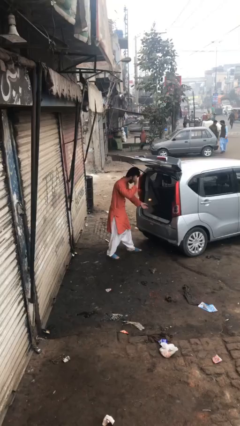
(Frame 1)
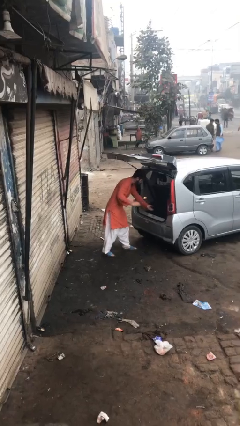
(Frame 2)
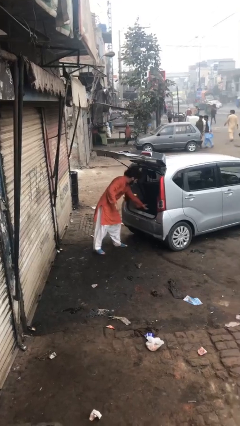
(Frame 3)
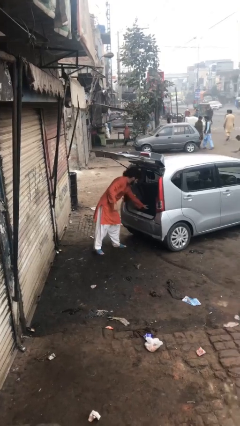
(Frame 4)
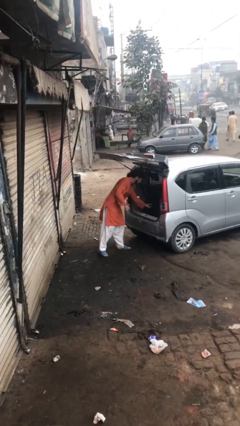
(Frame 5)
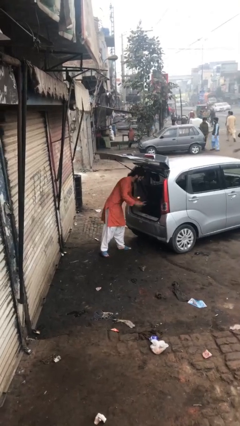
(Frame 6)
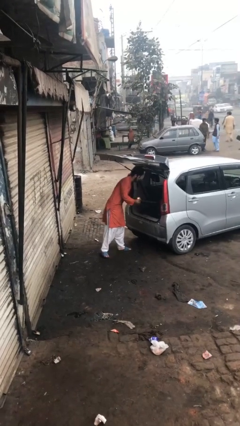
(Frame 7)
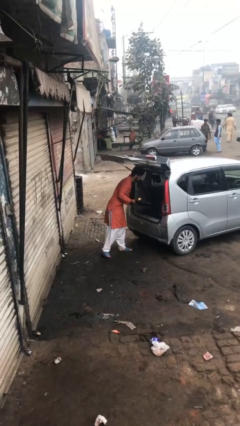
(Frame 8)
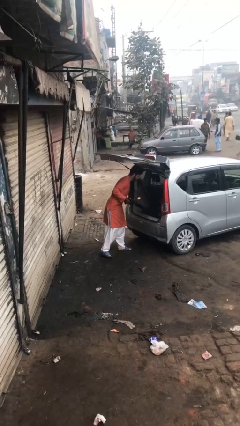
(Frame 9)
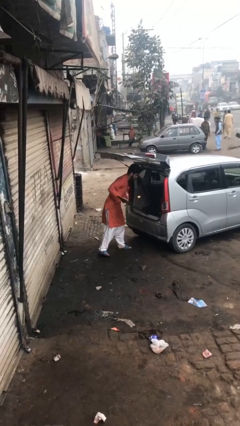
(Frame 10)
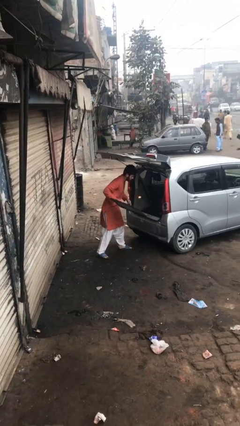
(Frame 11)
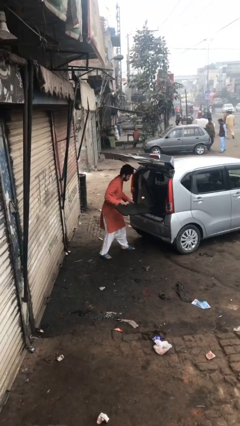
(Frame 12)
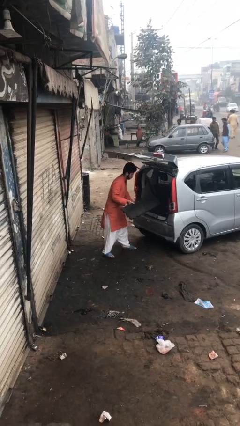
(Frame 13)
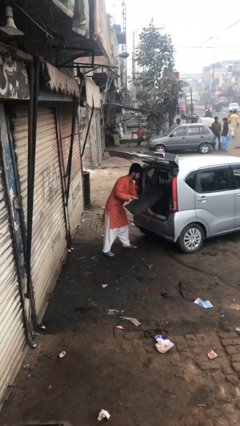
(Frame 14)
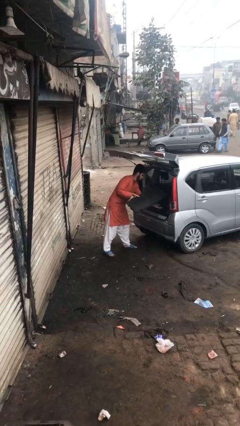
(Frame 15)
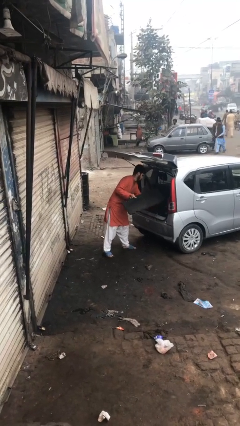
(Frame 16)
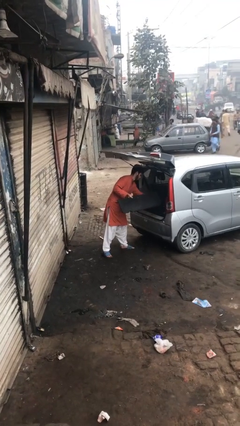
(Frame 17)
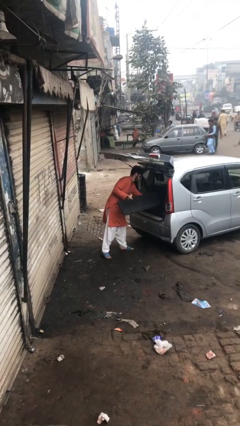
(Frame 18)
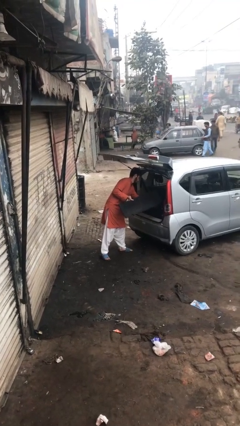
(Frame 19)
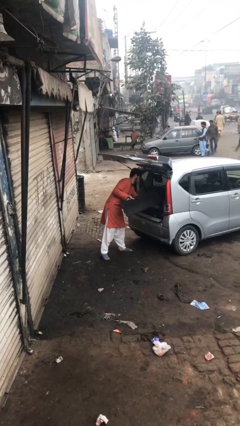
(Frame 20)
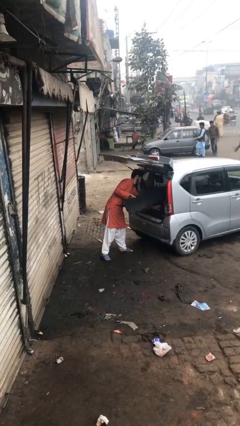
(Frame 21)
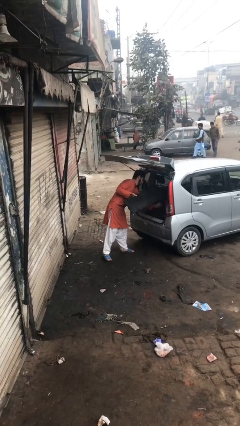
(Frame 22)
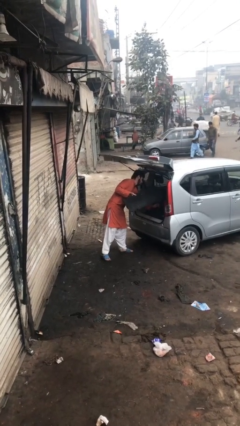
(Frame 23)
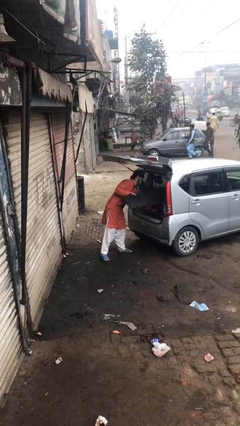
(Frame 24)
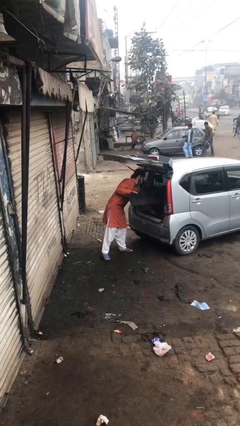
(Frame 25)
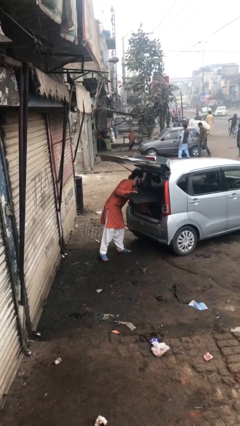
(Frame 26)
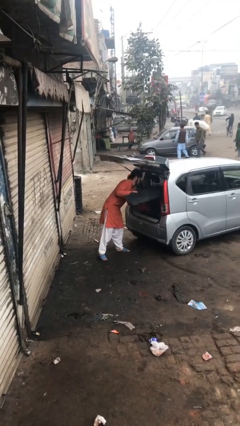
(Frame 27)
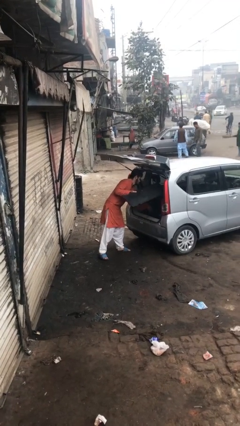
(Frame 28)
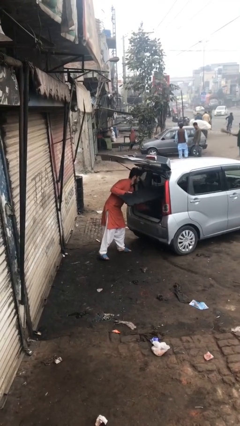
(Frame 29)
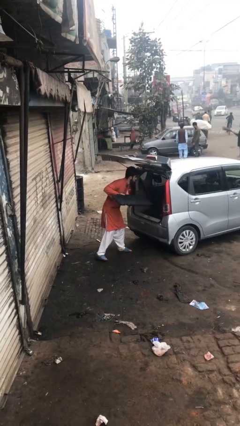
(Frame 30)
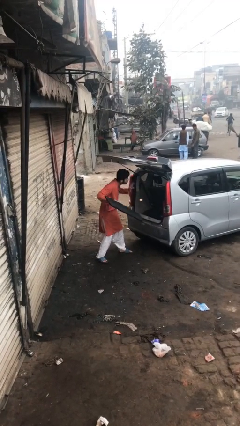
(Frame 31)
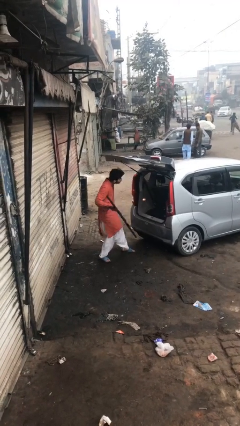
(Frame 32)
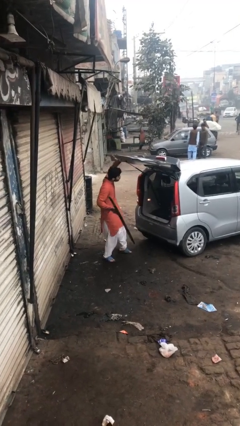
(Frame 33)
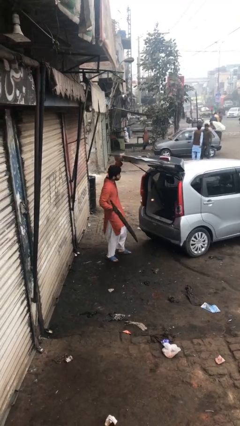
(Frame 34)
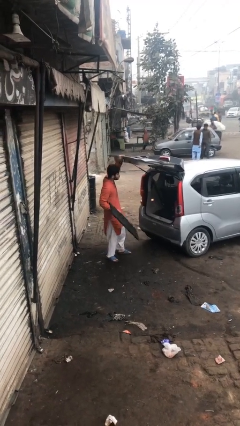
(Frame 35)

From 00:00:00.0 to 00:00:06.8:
person unloads car

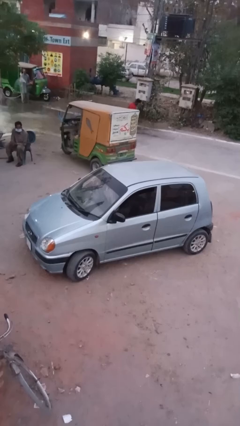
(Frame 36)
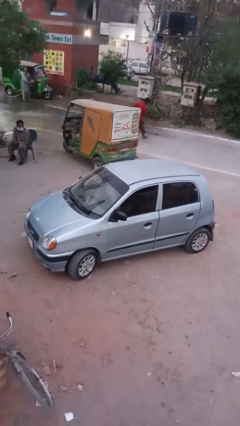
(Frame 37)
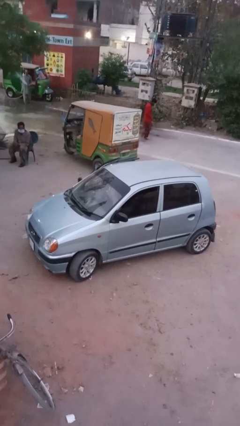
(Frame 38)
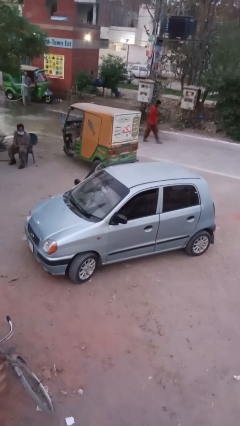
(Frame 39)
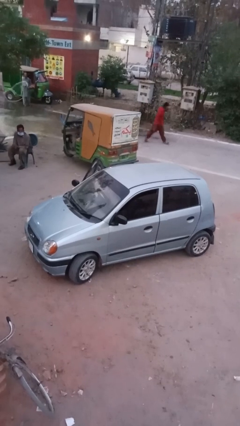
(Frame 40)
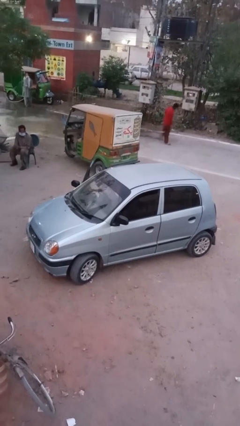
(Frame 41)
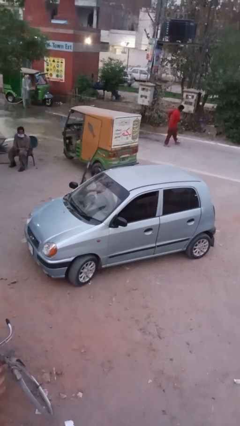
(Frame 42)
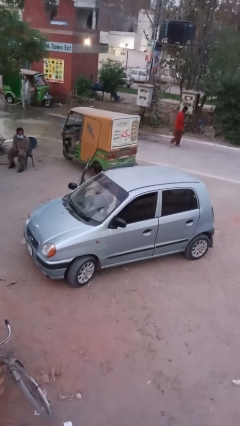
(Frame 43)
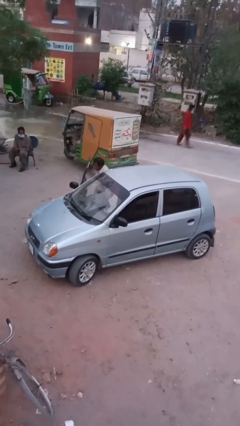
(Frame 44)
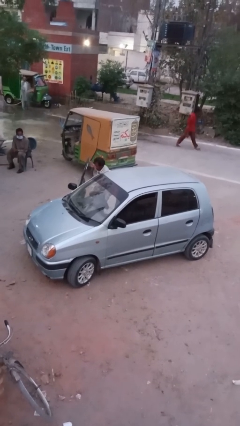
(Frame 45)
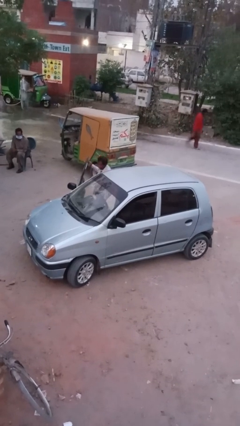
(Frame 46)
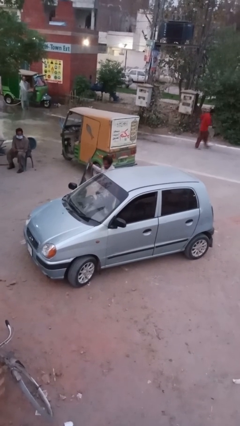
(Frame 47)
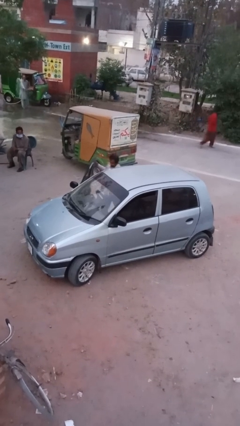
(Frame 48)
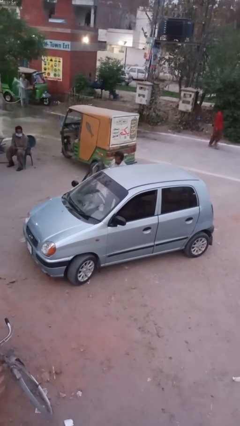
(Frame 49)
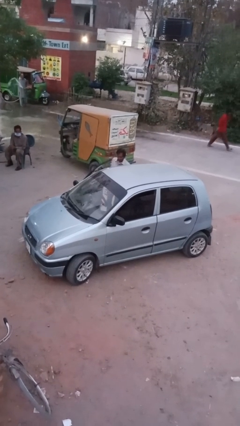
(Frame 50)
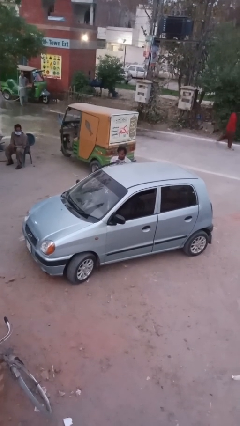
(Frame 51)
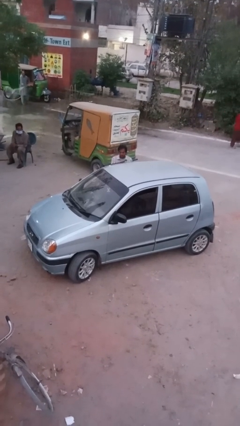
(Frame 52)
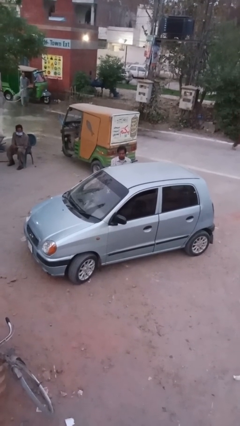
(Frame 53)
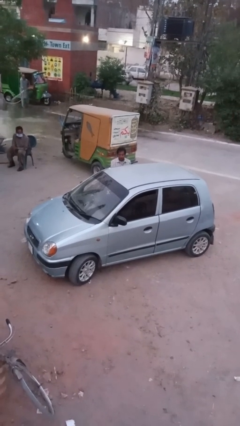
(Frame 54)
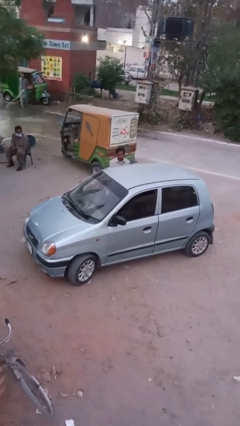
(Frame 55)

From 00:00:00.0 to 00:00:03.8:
person closes facility door

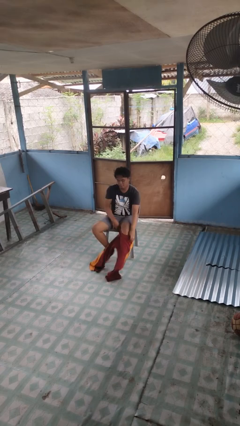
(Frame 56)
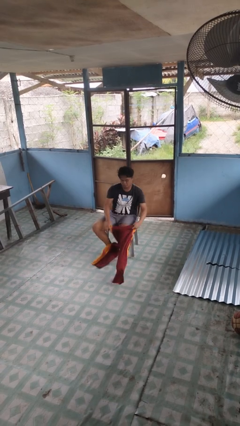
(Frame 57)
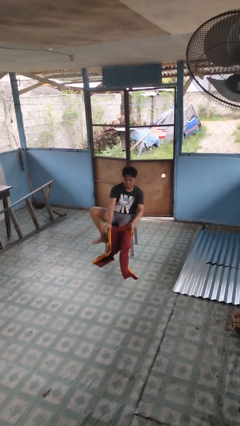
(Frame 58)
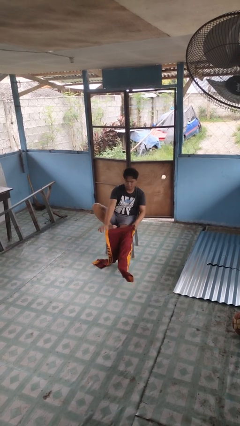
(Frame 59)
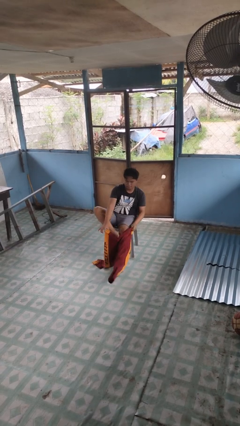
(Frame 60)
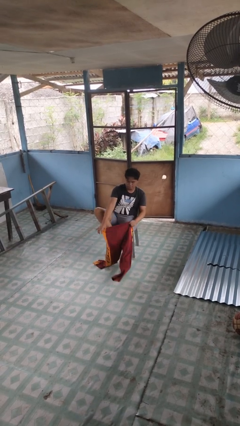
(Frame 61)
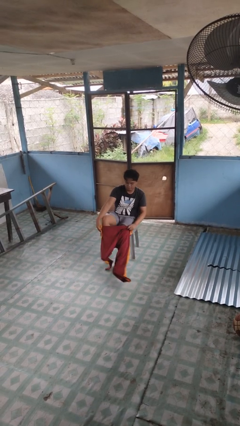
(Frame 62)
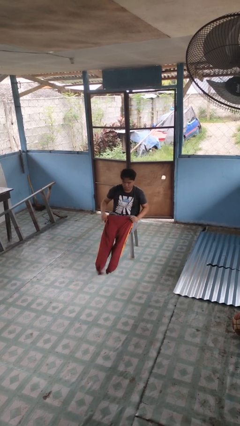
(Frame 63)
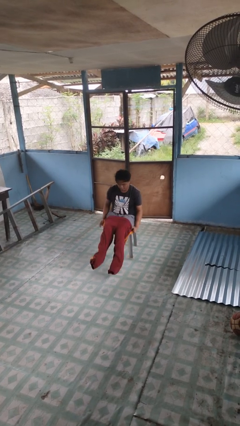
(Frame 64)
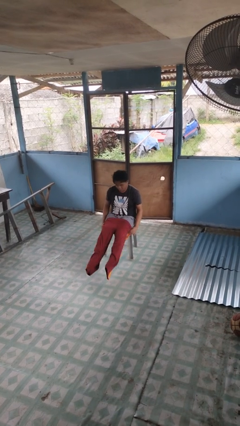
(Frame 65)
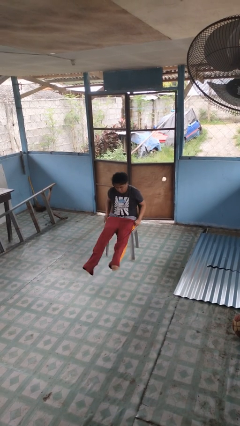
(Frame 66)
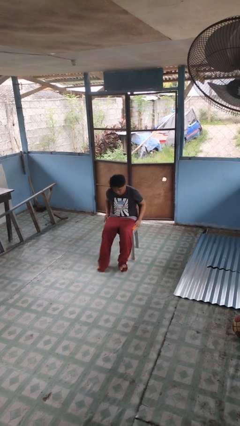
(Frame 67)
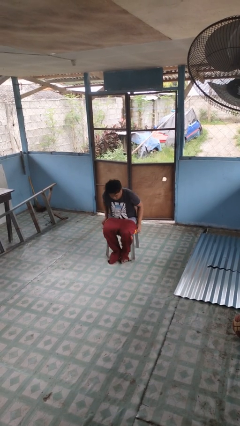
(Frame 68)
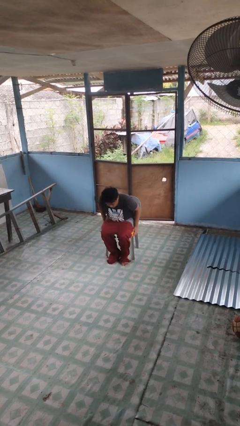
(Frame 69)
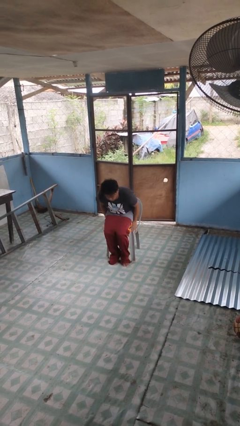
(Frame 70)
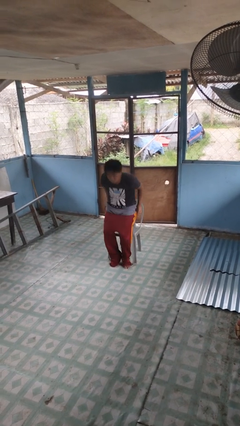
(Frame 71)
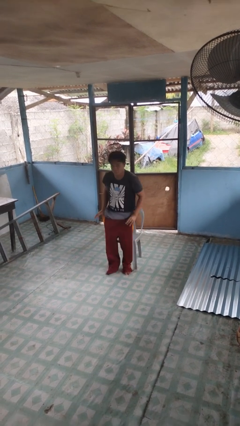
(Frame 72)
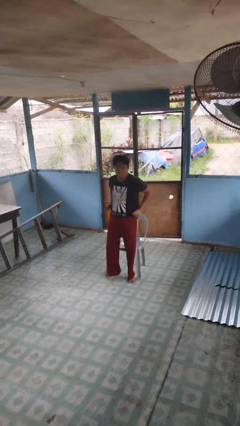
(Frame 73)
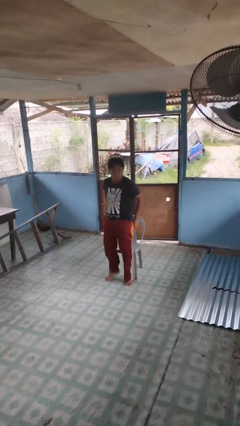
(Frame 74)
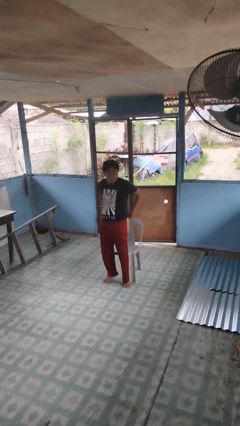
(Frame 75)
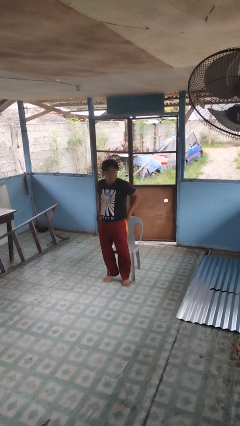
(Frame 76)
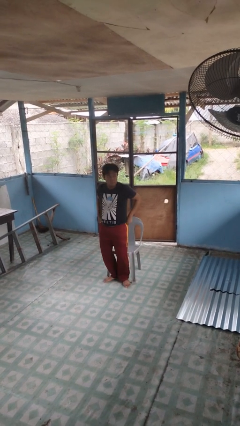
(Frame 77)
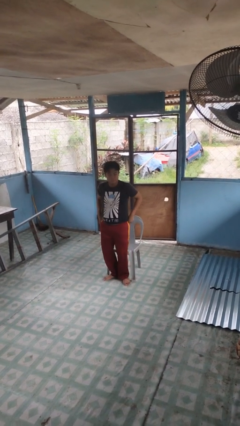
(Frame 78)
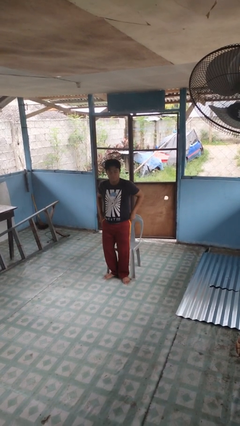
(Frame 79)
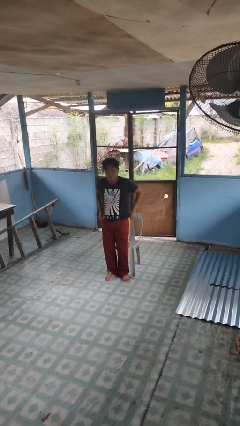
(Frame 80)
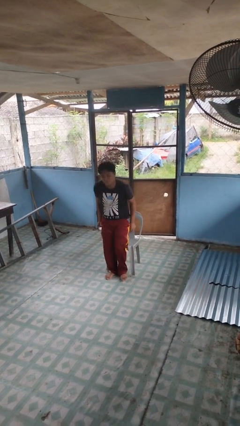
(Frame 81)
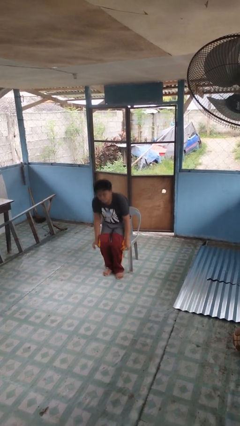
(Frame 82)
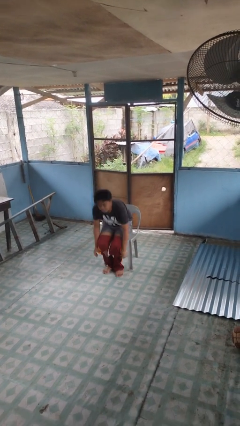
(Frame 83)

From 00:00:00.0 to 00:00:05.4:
person puts on pants

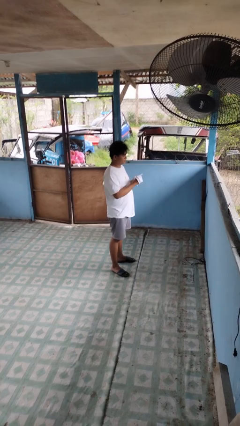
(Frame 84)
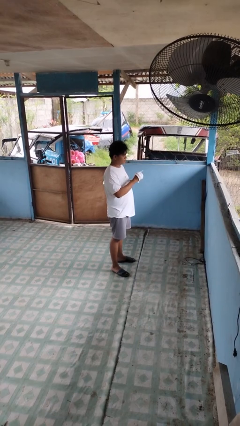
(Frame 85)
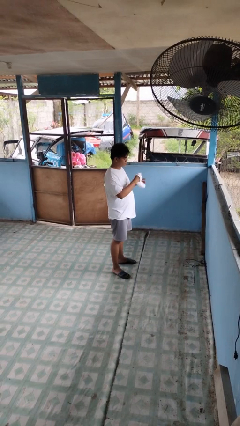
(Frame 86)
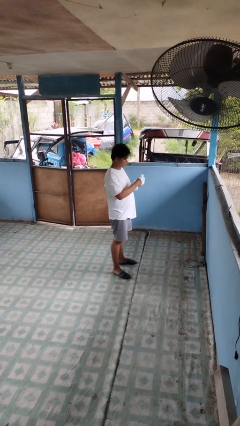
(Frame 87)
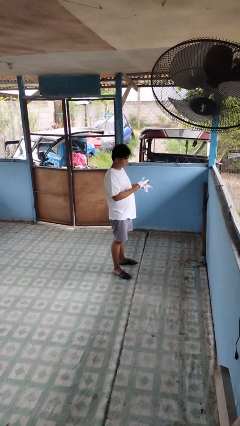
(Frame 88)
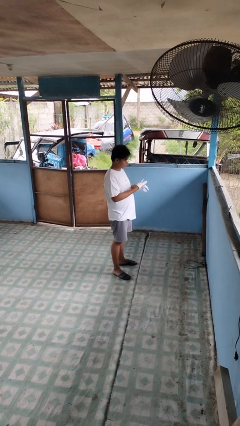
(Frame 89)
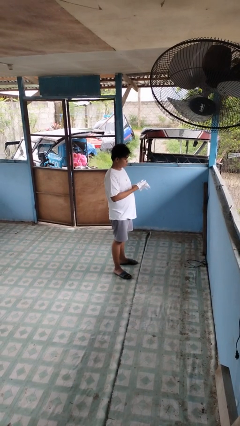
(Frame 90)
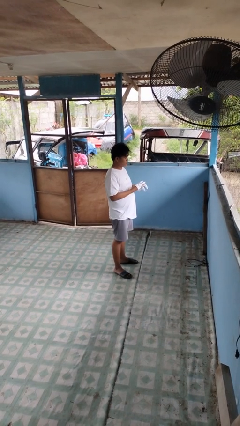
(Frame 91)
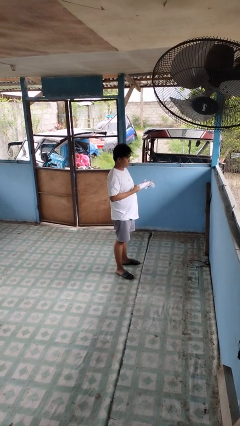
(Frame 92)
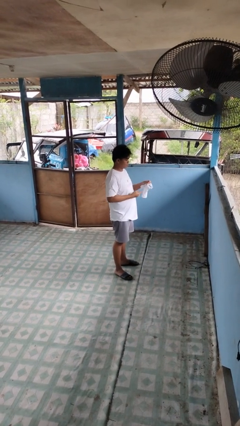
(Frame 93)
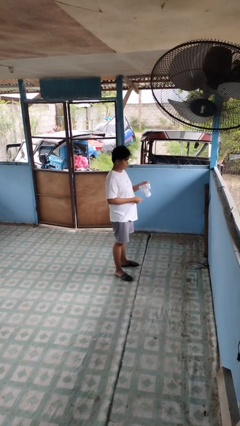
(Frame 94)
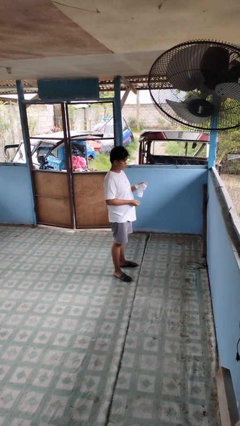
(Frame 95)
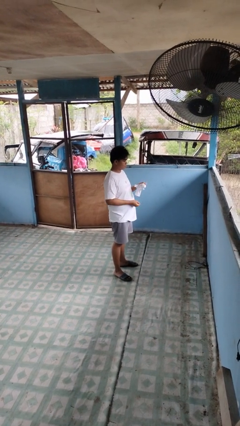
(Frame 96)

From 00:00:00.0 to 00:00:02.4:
person takes off gloves
